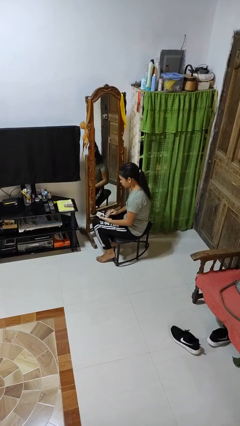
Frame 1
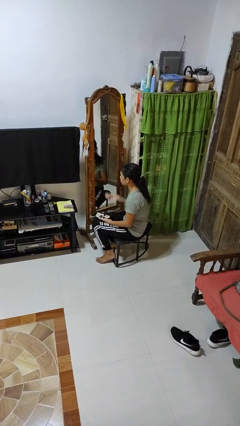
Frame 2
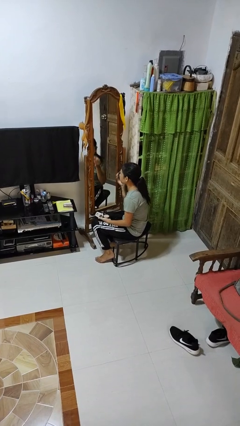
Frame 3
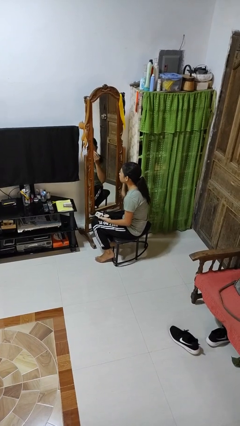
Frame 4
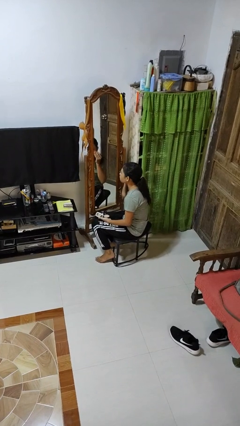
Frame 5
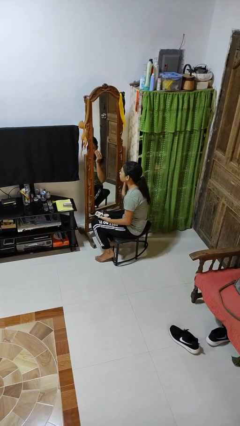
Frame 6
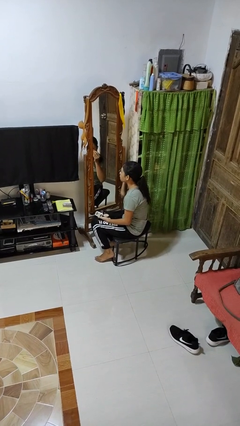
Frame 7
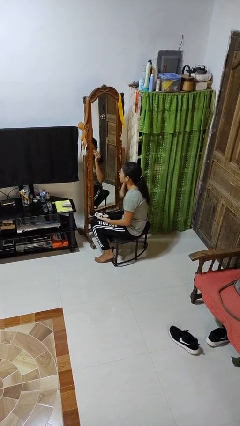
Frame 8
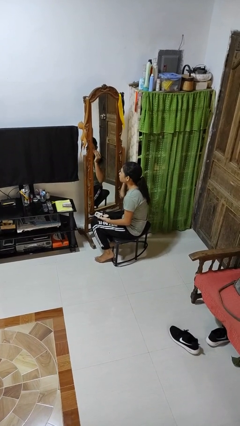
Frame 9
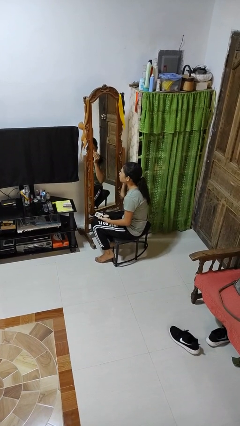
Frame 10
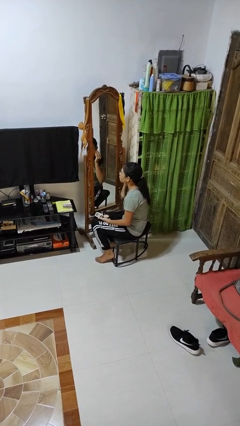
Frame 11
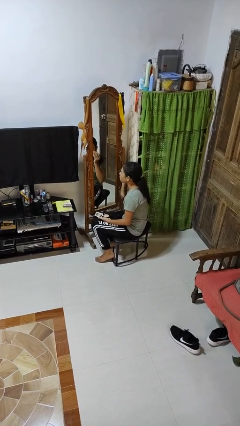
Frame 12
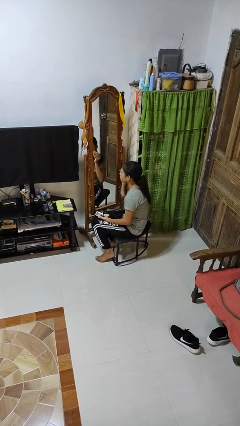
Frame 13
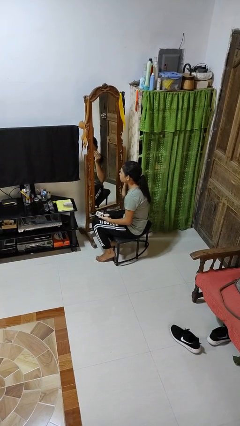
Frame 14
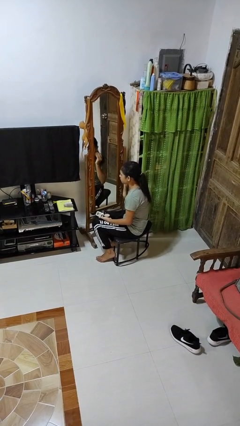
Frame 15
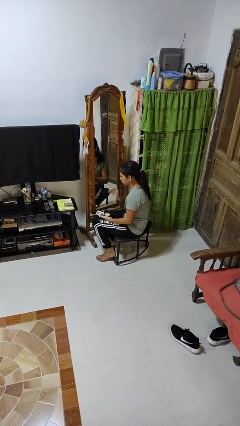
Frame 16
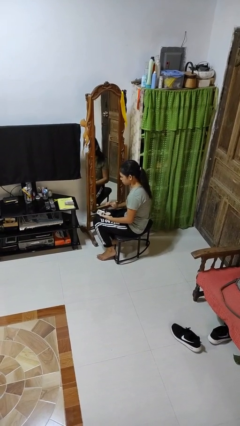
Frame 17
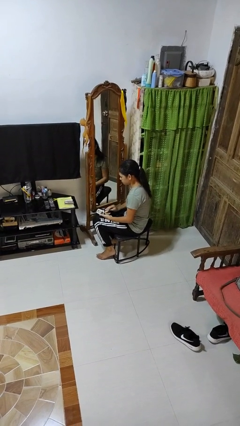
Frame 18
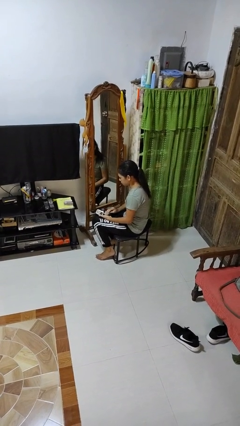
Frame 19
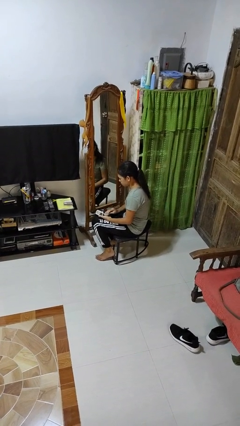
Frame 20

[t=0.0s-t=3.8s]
person applies foundation makeup

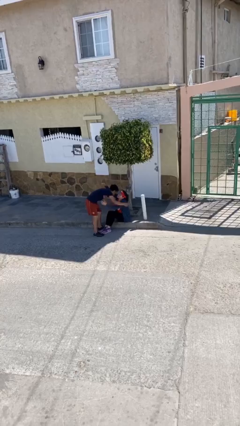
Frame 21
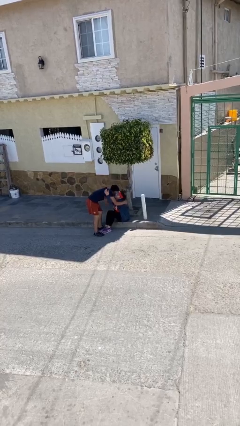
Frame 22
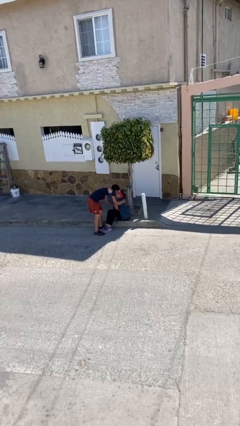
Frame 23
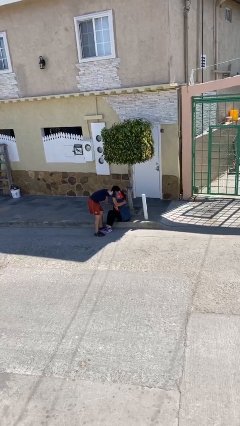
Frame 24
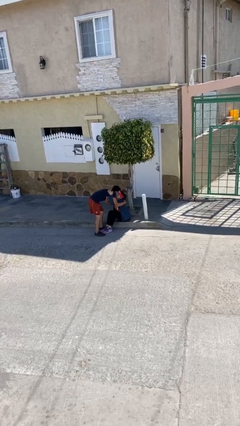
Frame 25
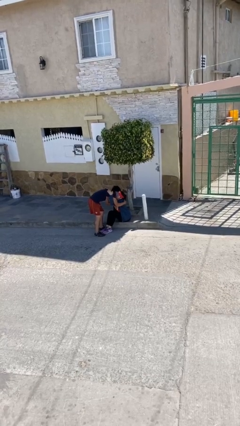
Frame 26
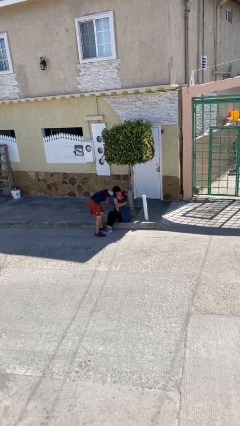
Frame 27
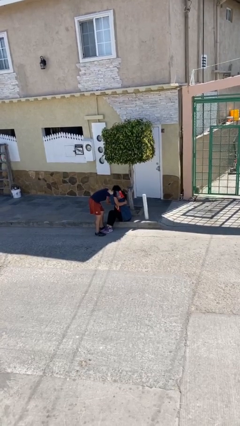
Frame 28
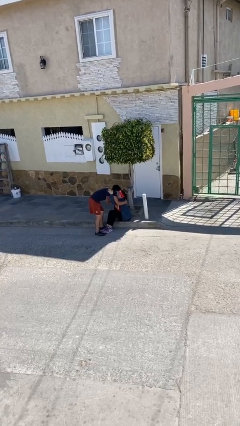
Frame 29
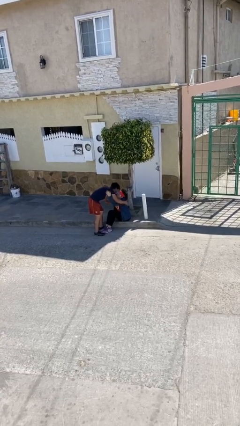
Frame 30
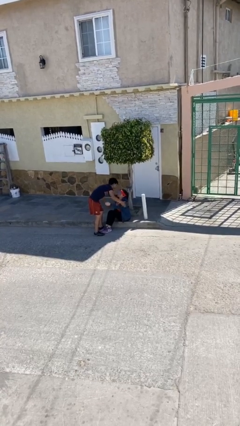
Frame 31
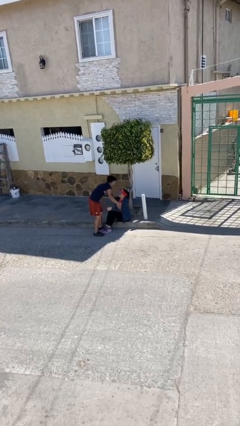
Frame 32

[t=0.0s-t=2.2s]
person embraces person

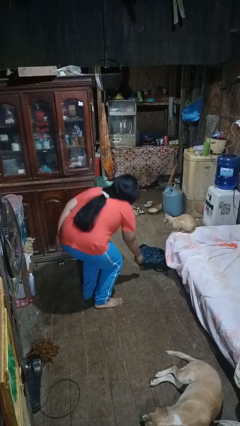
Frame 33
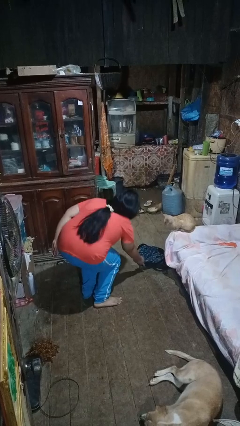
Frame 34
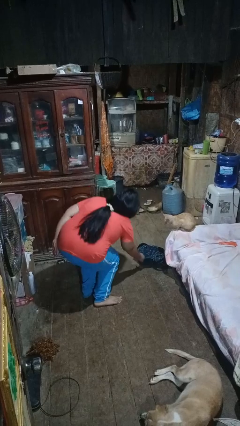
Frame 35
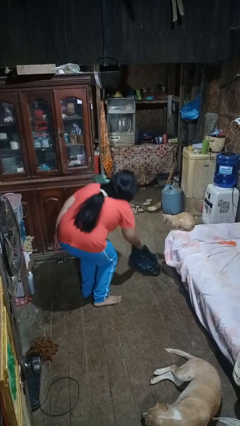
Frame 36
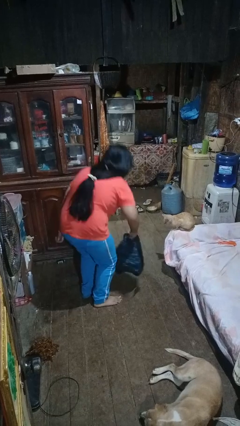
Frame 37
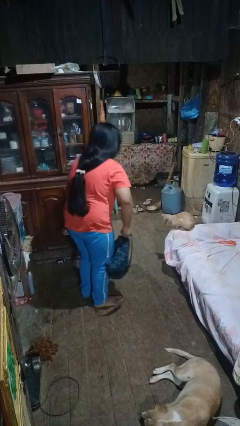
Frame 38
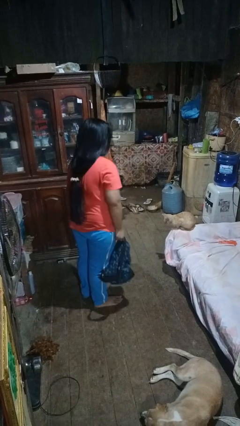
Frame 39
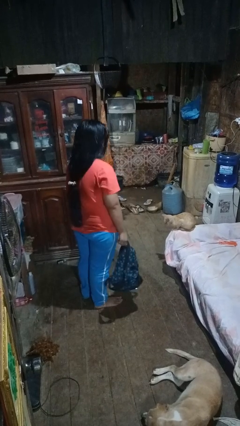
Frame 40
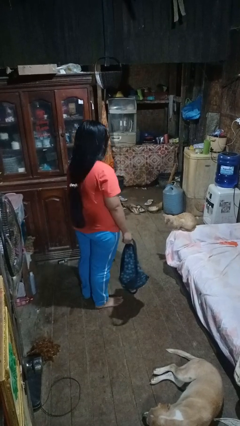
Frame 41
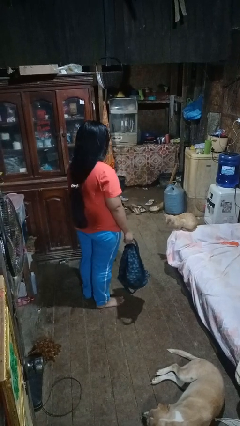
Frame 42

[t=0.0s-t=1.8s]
person picks up object from floor

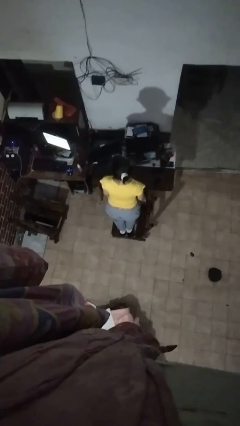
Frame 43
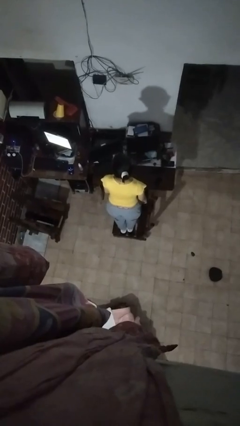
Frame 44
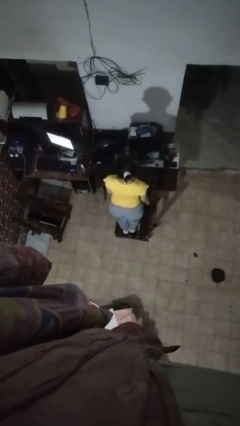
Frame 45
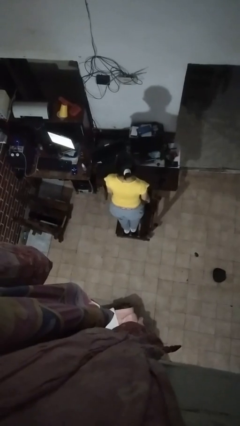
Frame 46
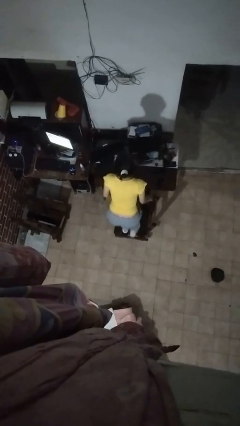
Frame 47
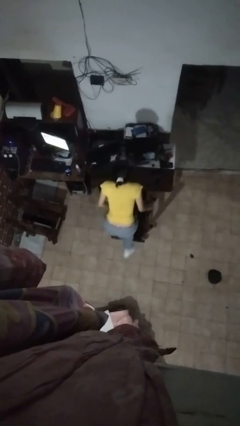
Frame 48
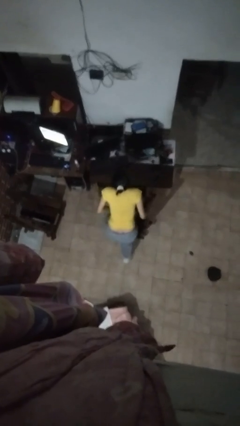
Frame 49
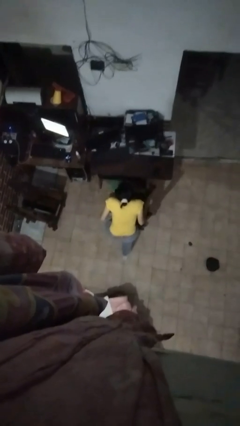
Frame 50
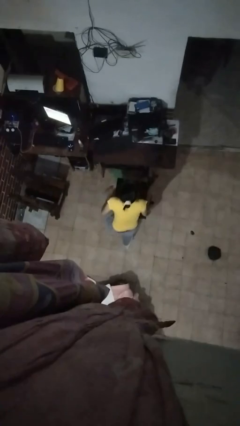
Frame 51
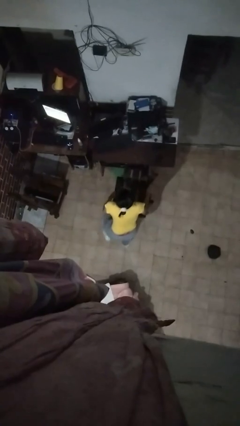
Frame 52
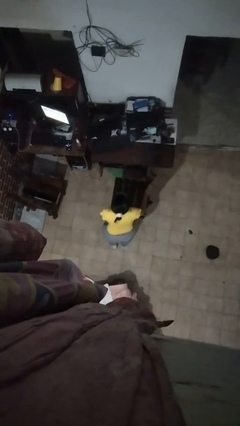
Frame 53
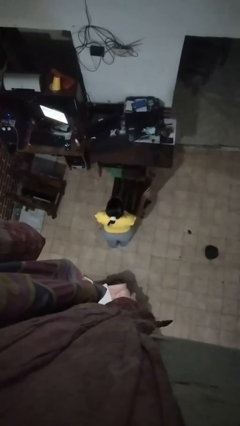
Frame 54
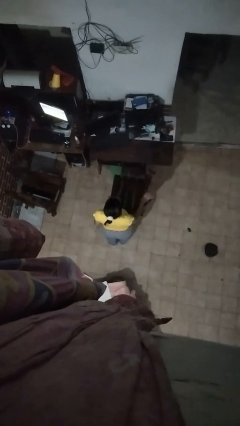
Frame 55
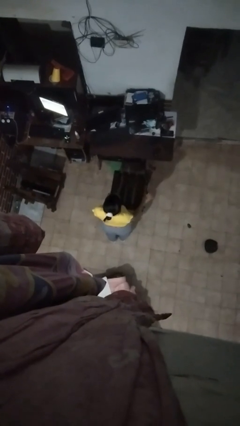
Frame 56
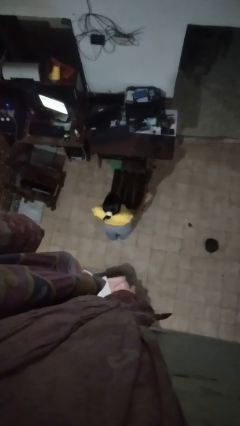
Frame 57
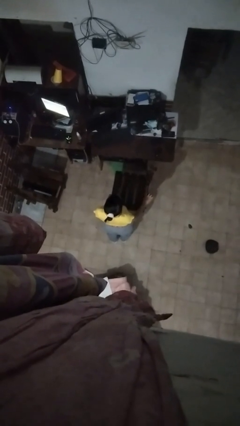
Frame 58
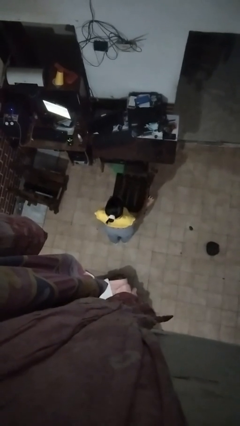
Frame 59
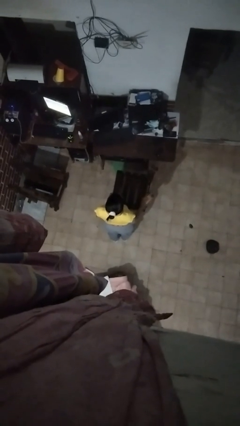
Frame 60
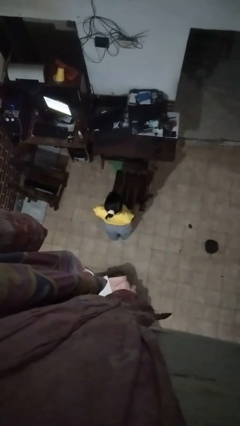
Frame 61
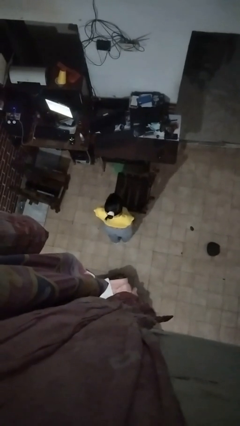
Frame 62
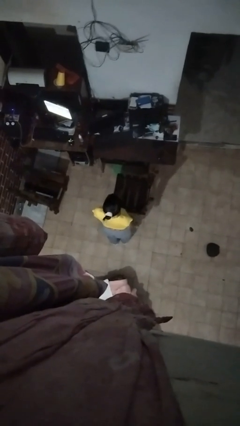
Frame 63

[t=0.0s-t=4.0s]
person climbs off chair

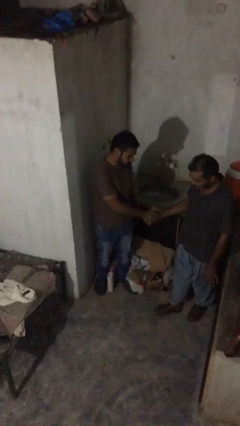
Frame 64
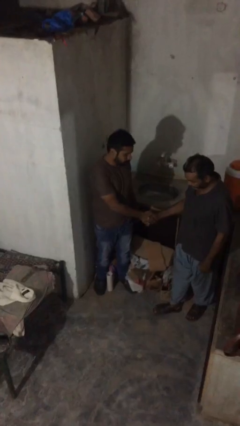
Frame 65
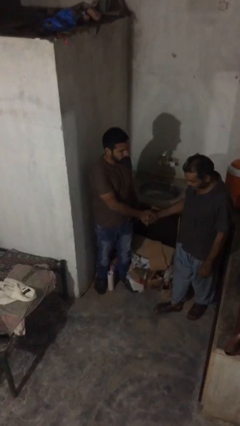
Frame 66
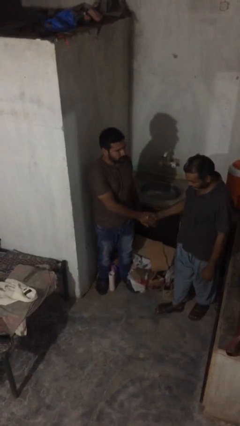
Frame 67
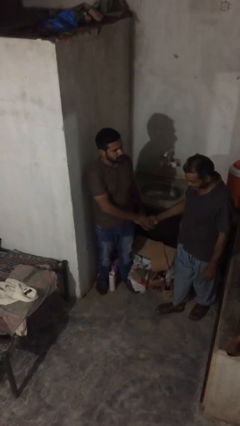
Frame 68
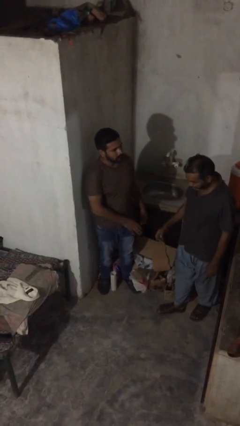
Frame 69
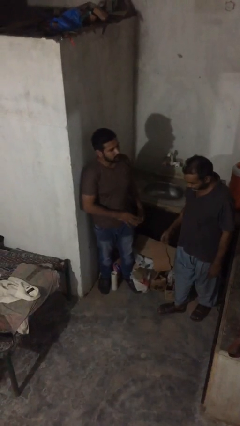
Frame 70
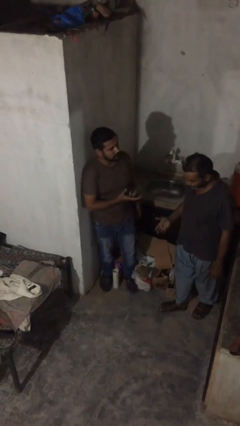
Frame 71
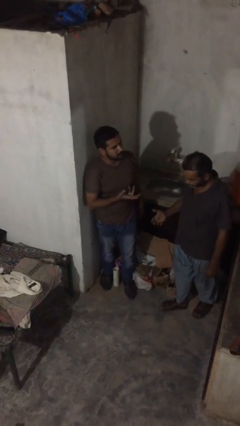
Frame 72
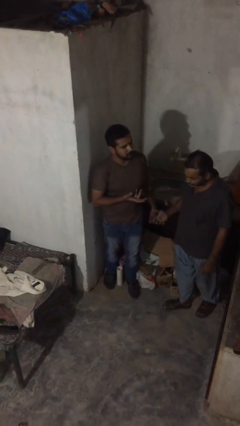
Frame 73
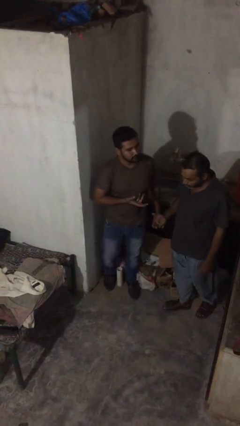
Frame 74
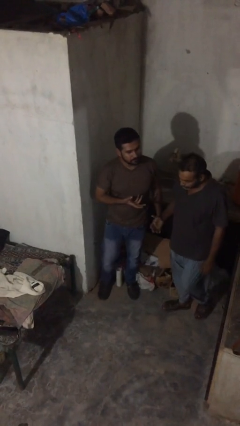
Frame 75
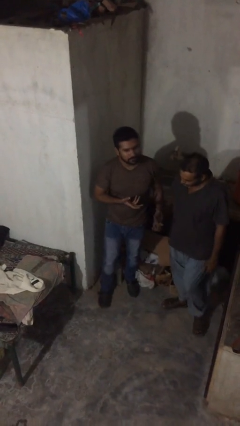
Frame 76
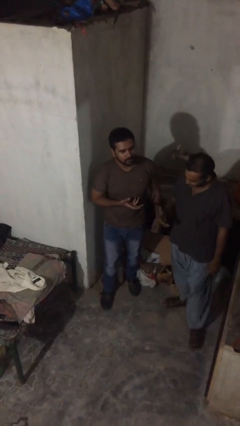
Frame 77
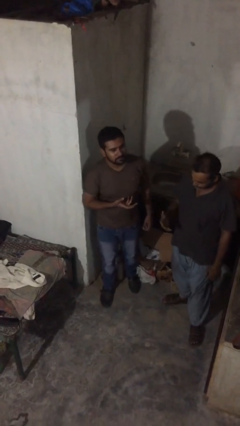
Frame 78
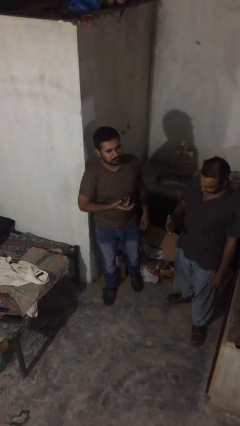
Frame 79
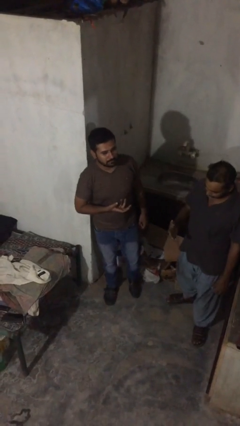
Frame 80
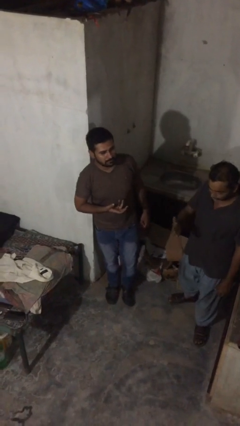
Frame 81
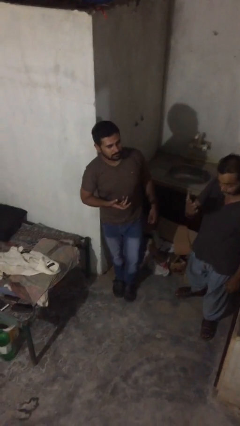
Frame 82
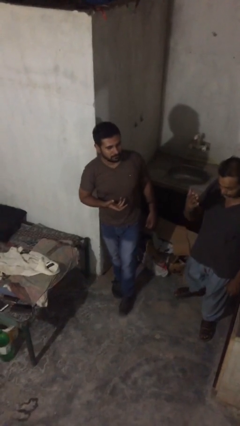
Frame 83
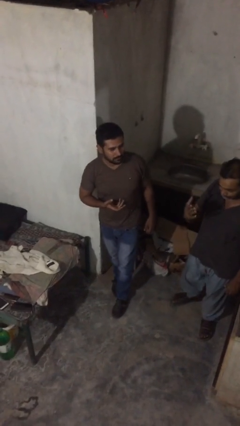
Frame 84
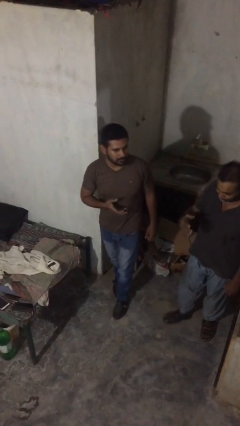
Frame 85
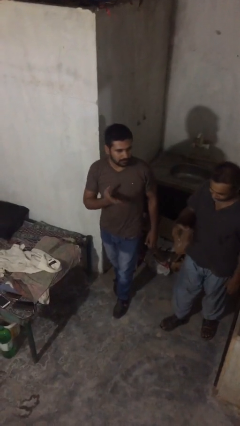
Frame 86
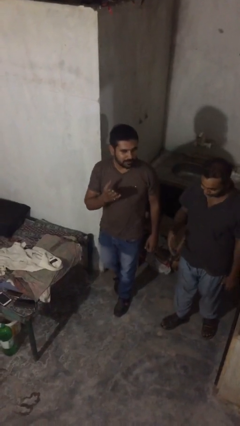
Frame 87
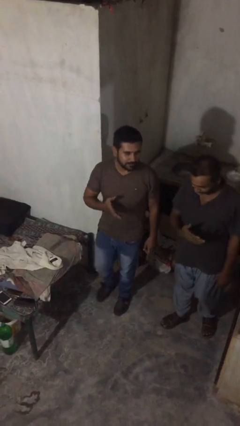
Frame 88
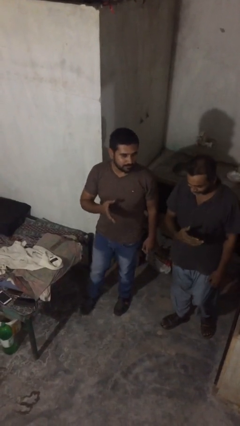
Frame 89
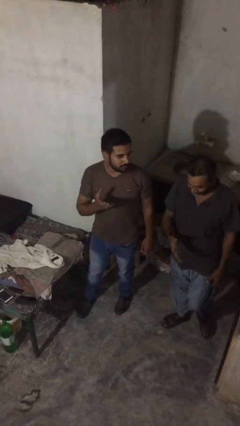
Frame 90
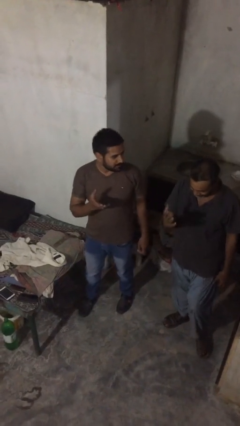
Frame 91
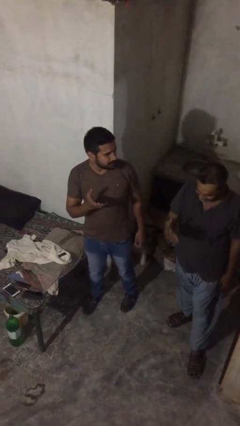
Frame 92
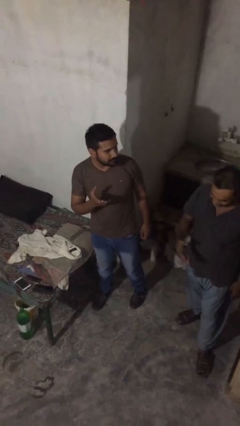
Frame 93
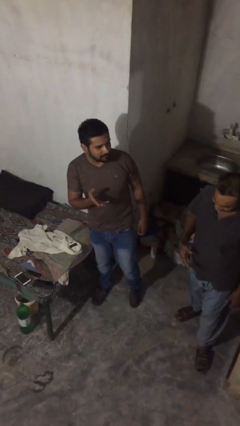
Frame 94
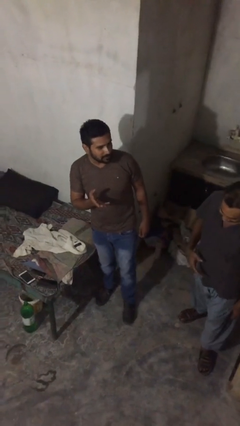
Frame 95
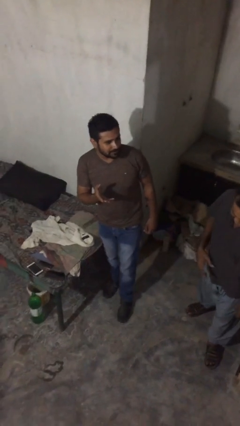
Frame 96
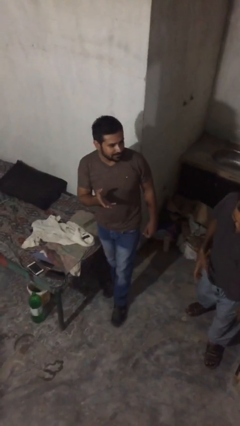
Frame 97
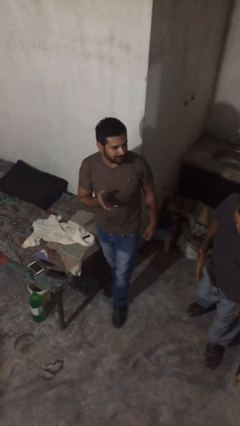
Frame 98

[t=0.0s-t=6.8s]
person talks to person
